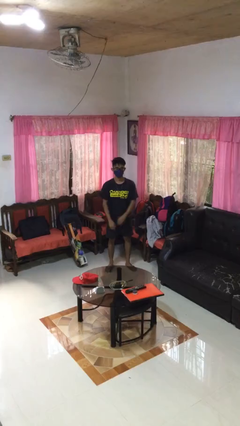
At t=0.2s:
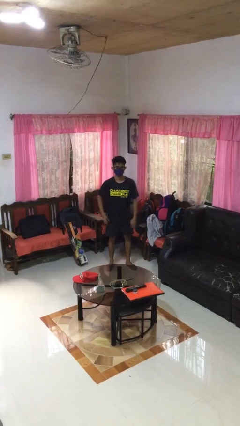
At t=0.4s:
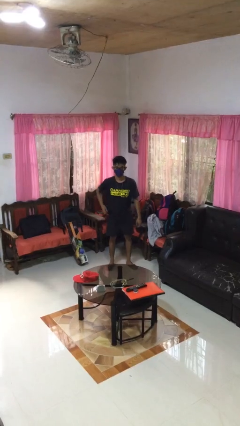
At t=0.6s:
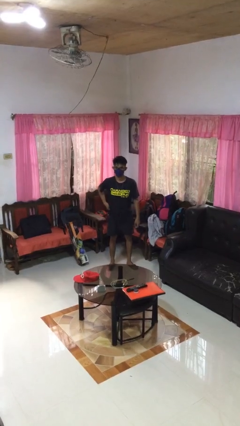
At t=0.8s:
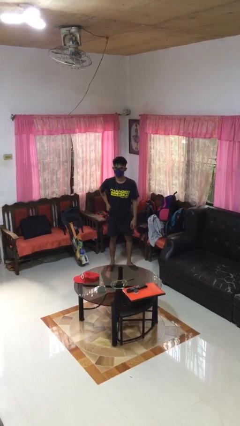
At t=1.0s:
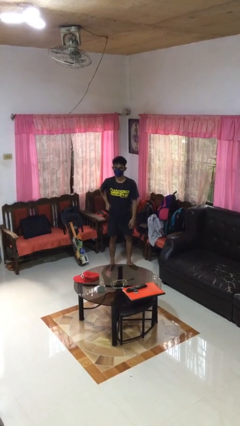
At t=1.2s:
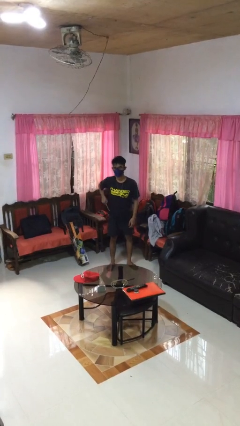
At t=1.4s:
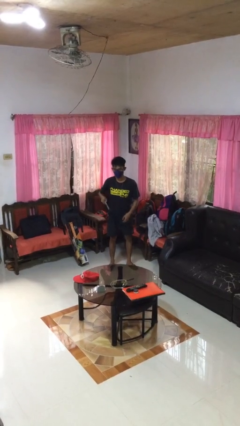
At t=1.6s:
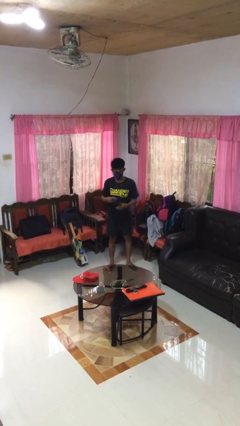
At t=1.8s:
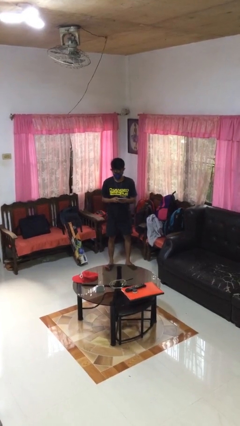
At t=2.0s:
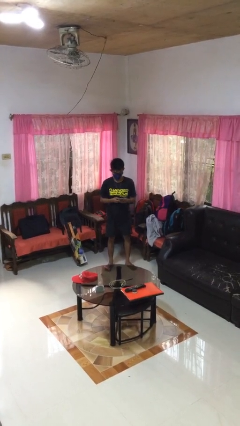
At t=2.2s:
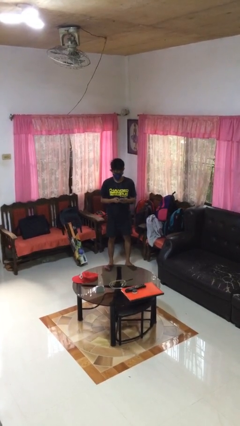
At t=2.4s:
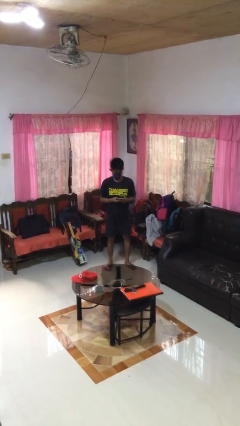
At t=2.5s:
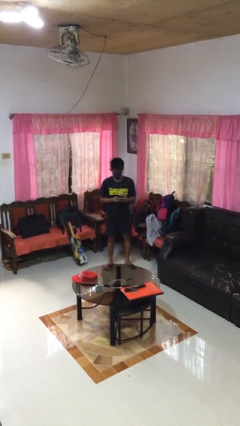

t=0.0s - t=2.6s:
person takes phone from pocket

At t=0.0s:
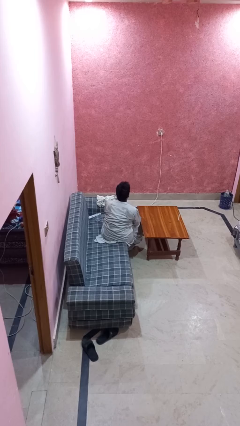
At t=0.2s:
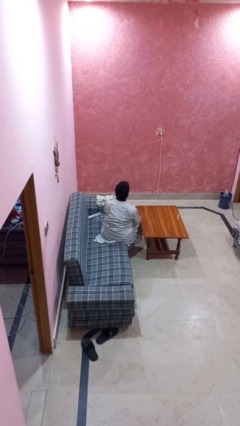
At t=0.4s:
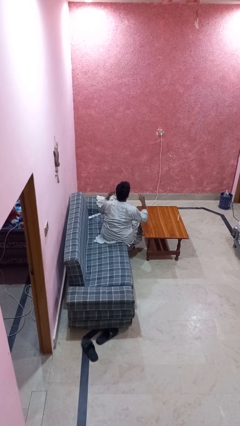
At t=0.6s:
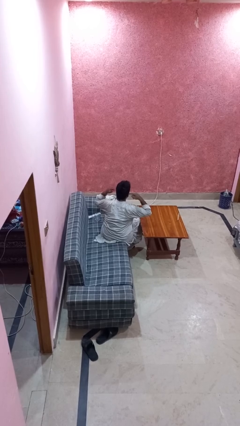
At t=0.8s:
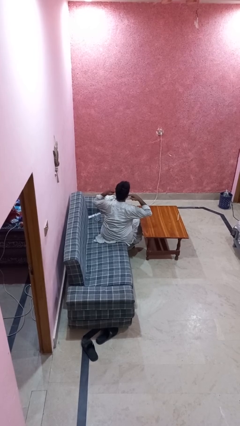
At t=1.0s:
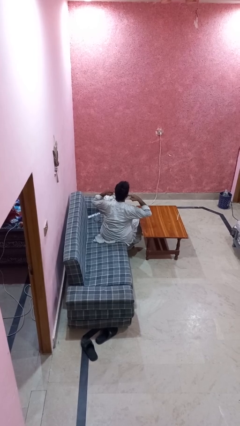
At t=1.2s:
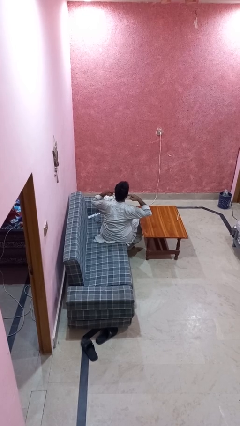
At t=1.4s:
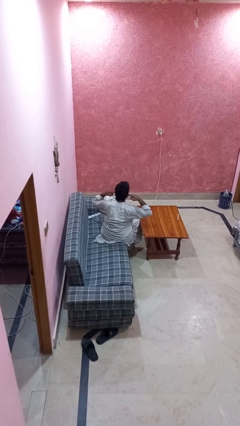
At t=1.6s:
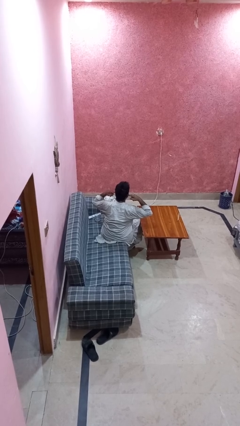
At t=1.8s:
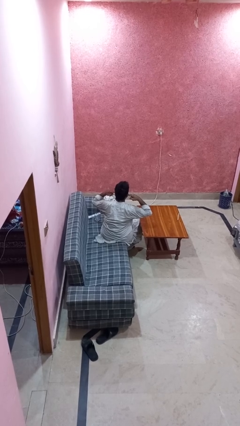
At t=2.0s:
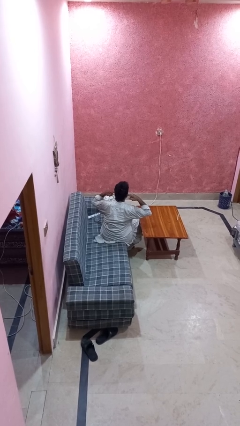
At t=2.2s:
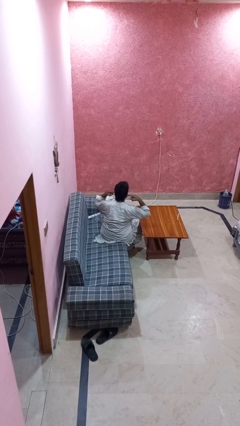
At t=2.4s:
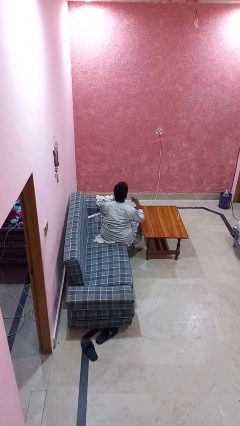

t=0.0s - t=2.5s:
person puts fingers in ear

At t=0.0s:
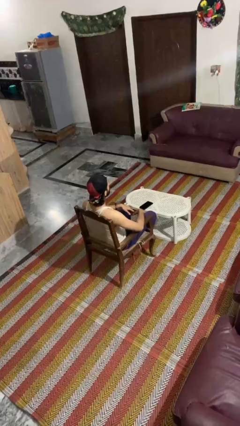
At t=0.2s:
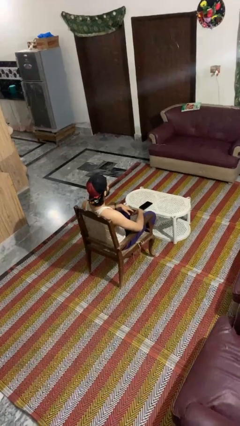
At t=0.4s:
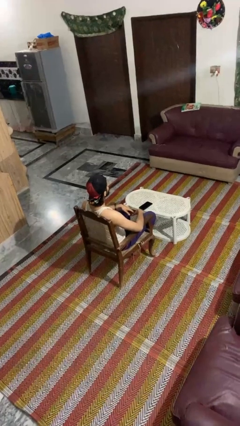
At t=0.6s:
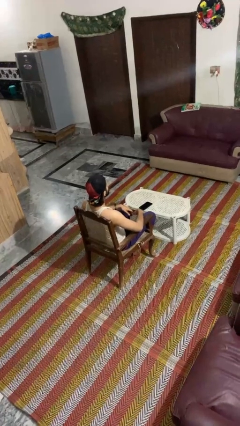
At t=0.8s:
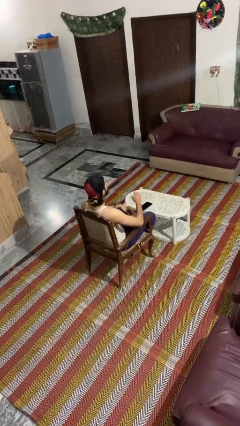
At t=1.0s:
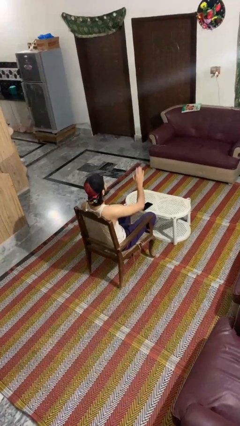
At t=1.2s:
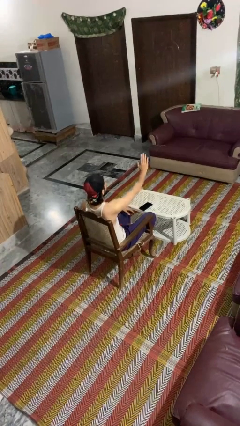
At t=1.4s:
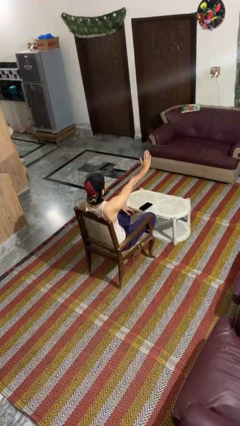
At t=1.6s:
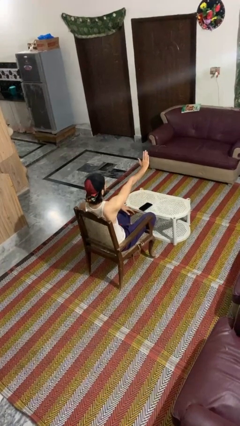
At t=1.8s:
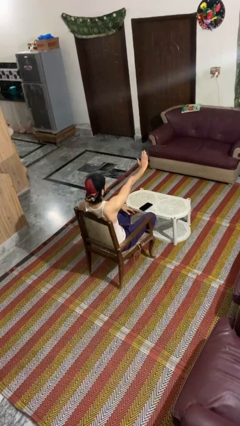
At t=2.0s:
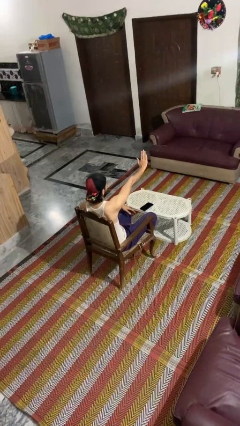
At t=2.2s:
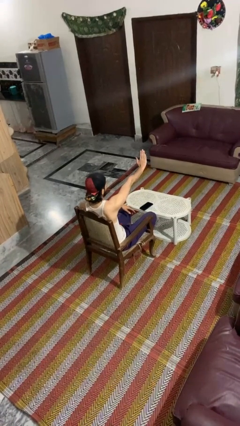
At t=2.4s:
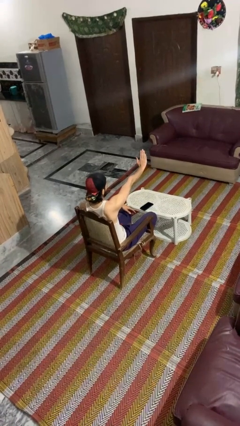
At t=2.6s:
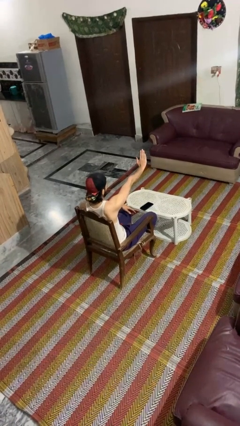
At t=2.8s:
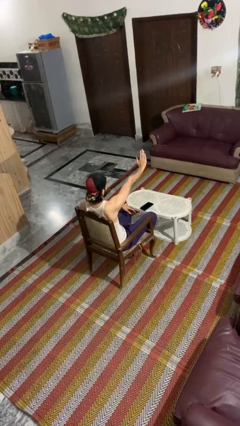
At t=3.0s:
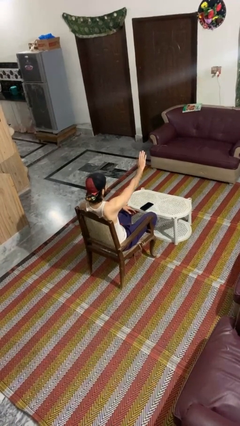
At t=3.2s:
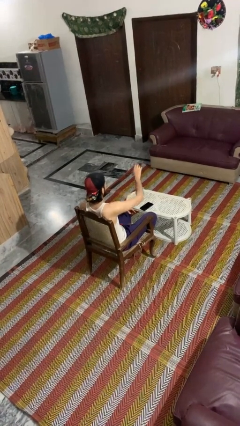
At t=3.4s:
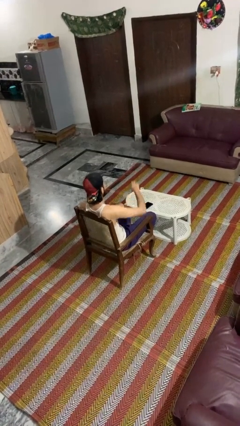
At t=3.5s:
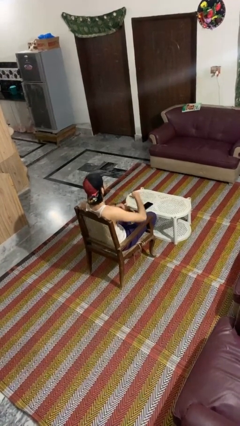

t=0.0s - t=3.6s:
person gestures stop

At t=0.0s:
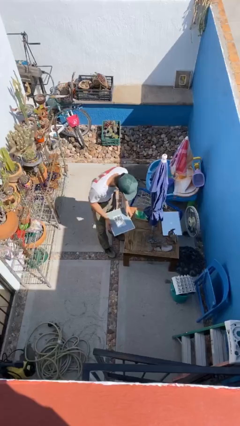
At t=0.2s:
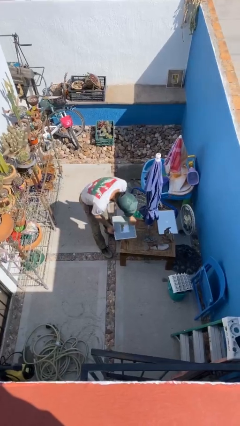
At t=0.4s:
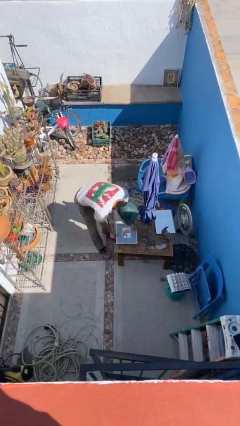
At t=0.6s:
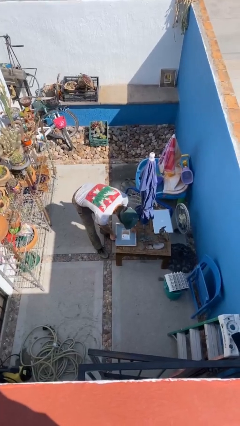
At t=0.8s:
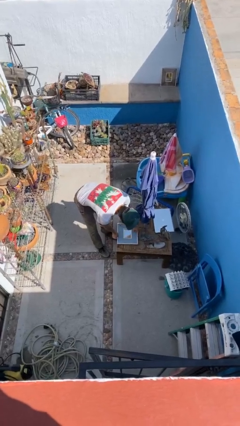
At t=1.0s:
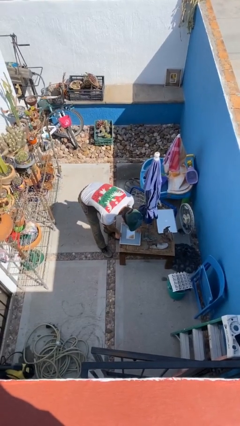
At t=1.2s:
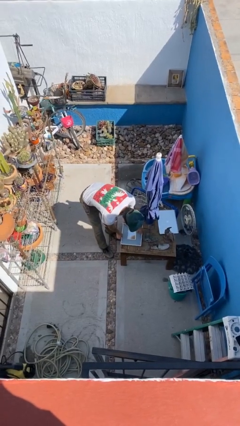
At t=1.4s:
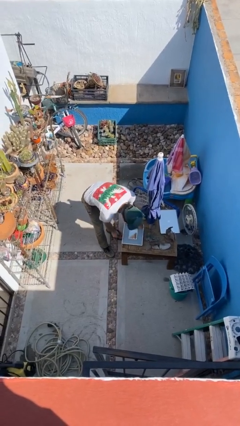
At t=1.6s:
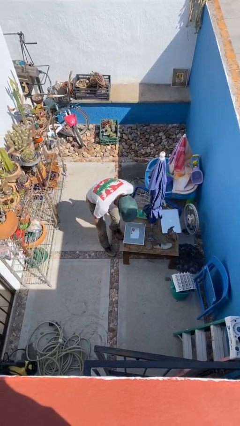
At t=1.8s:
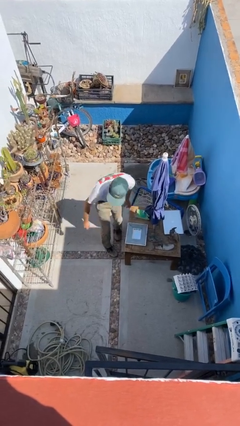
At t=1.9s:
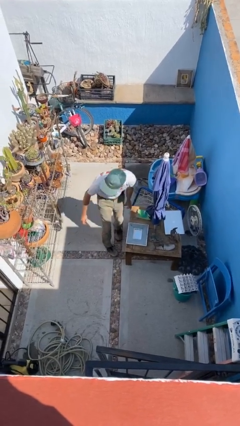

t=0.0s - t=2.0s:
person puts down object on table

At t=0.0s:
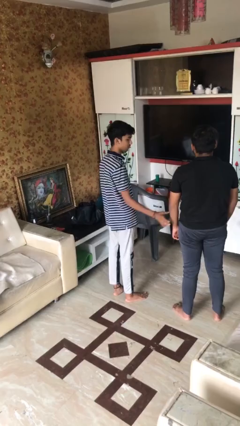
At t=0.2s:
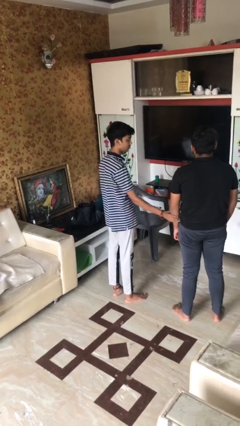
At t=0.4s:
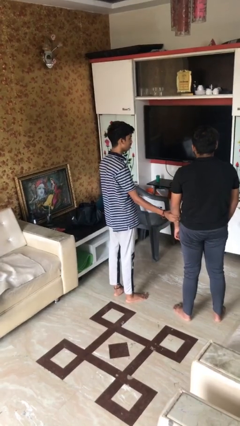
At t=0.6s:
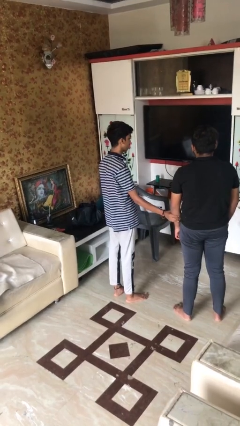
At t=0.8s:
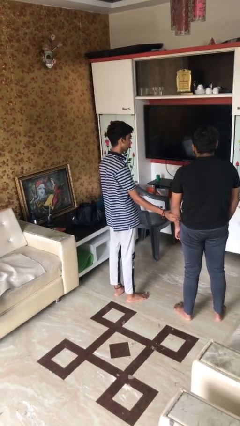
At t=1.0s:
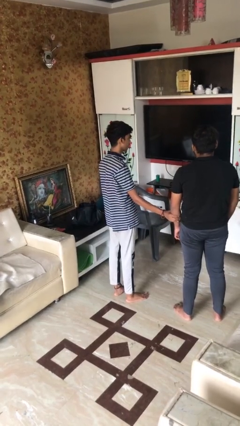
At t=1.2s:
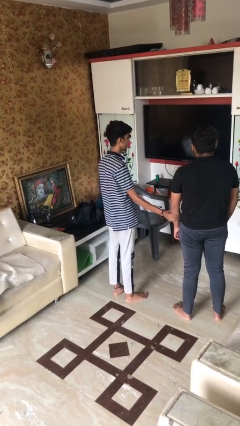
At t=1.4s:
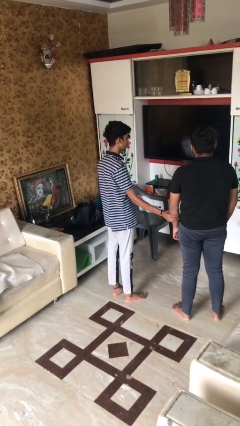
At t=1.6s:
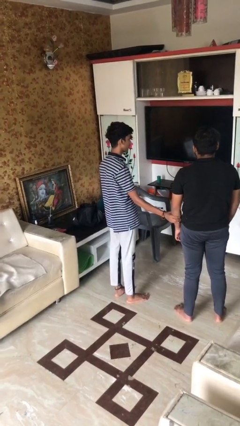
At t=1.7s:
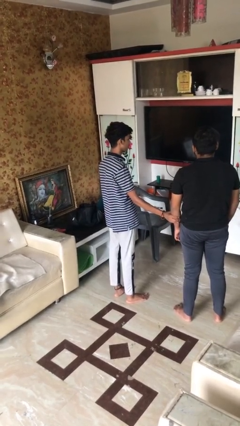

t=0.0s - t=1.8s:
person grabs person by forearm

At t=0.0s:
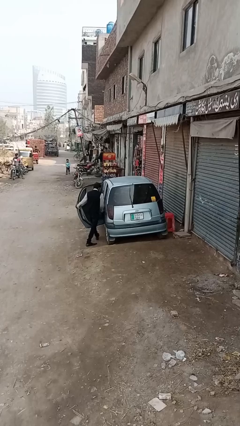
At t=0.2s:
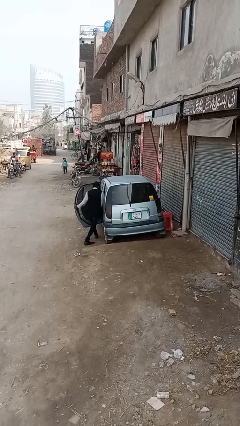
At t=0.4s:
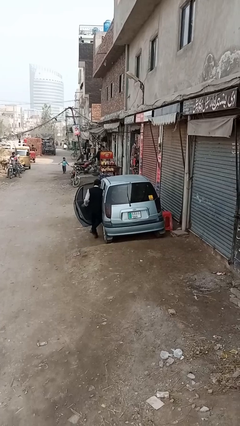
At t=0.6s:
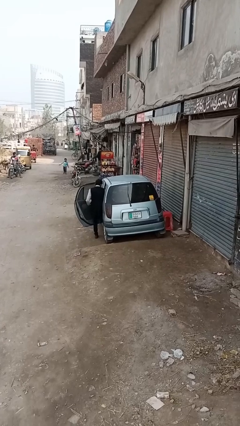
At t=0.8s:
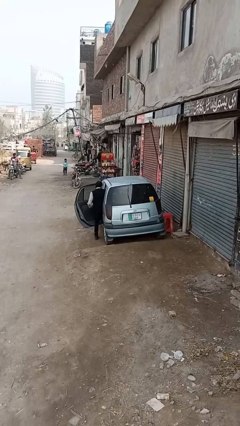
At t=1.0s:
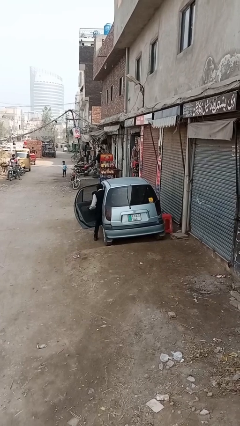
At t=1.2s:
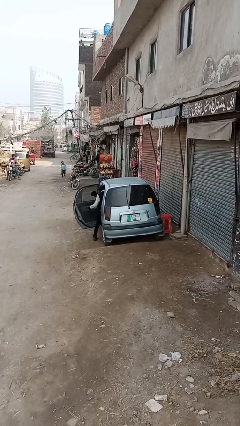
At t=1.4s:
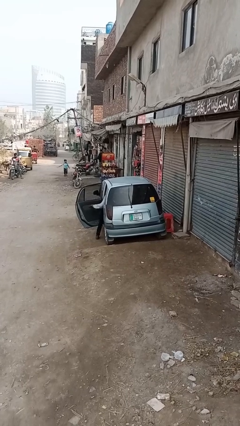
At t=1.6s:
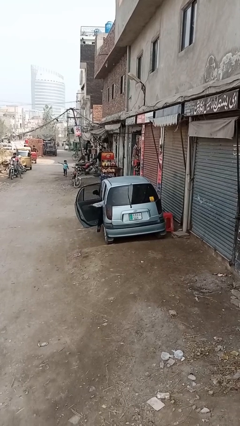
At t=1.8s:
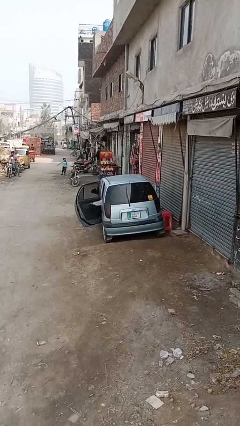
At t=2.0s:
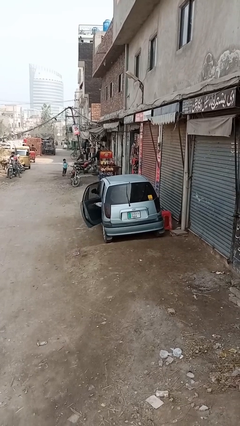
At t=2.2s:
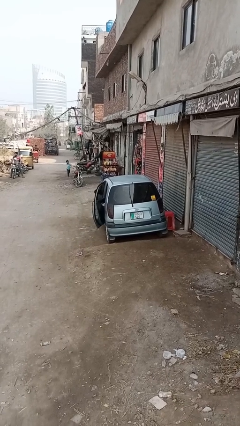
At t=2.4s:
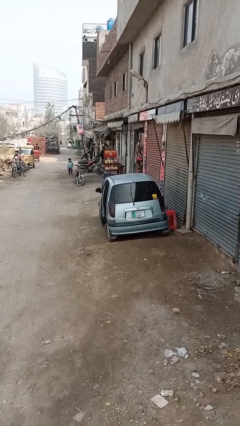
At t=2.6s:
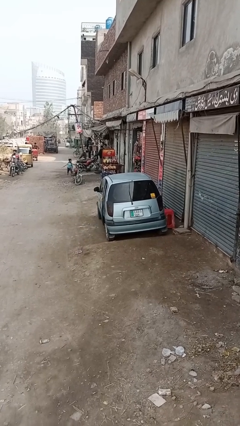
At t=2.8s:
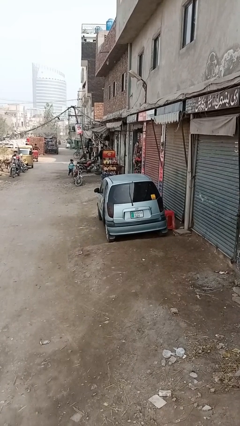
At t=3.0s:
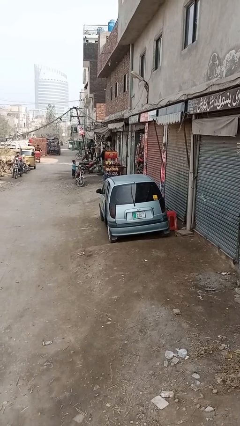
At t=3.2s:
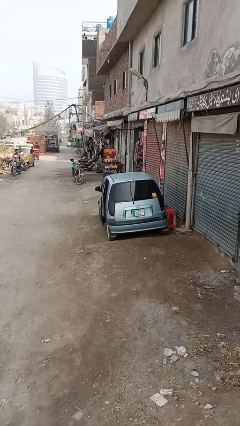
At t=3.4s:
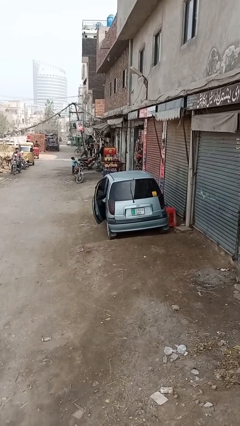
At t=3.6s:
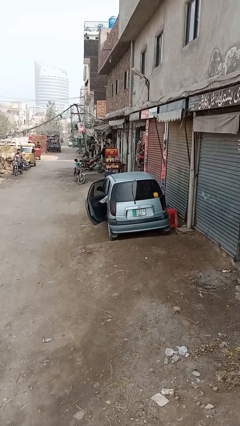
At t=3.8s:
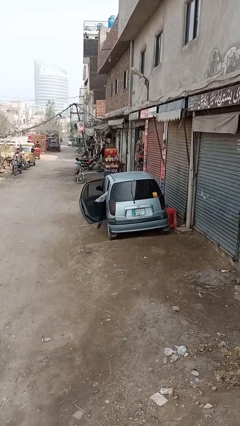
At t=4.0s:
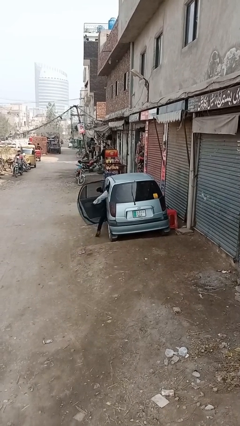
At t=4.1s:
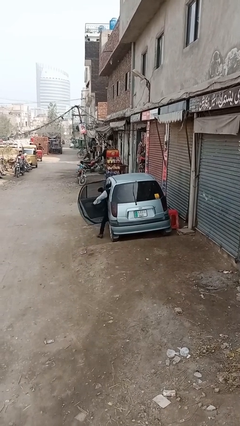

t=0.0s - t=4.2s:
car picks up person
